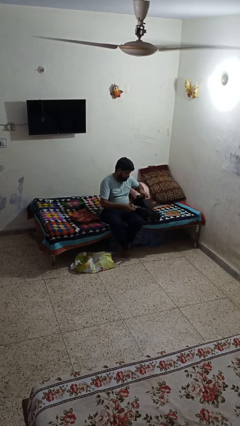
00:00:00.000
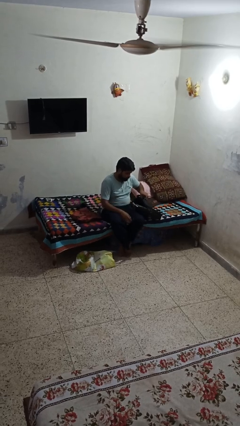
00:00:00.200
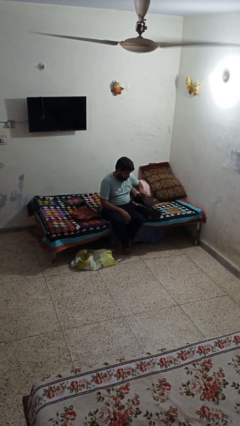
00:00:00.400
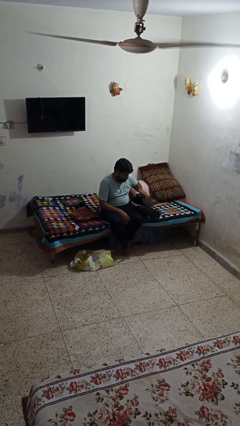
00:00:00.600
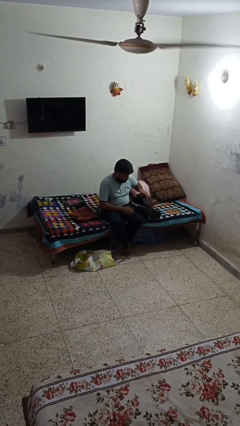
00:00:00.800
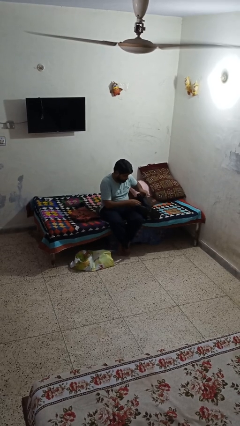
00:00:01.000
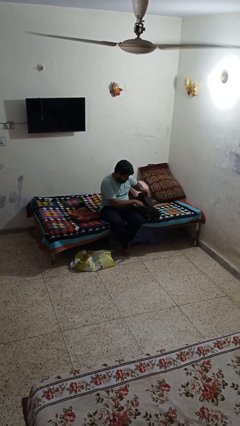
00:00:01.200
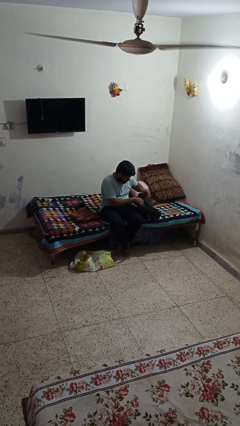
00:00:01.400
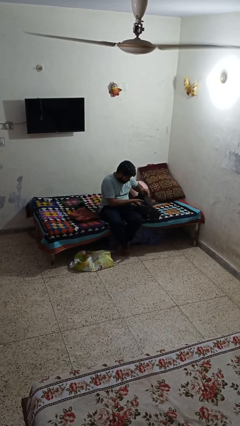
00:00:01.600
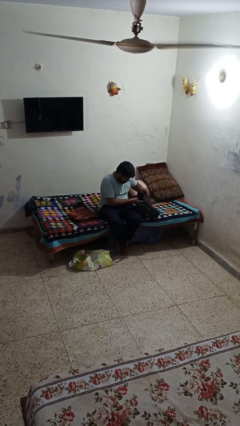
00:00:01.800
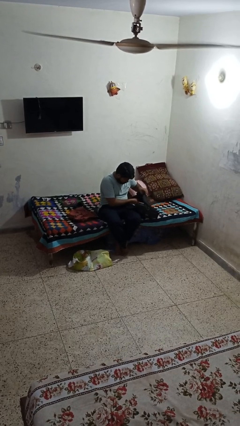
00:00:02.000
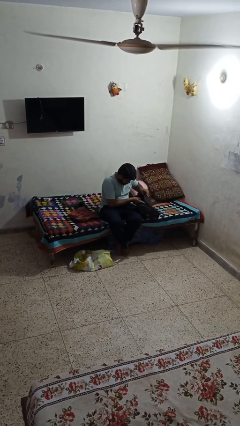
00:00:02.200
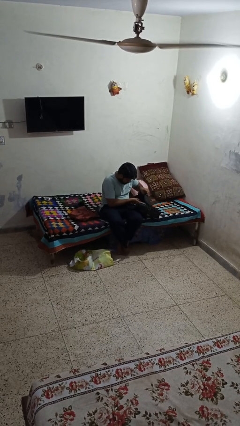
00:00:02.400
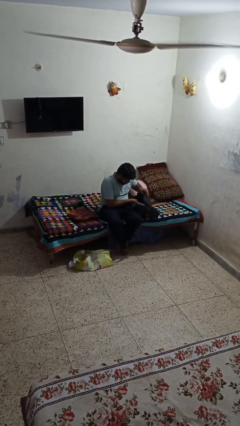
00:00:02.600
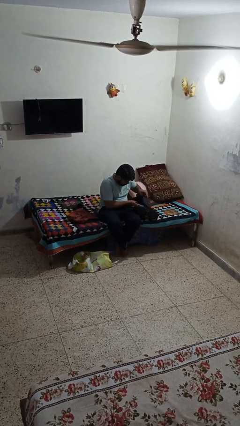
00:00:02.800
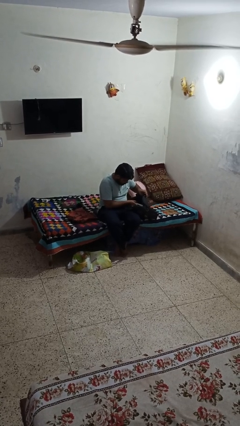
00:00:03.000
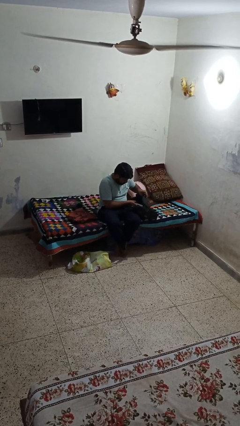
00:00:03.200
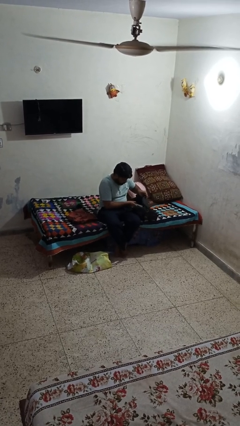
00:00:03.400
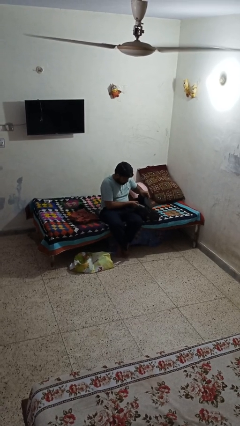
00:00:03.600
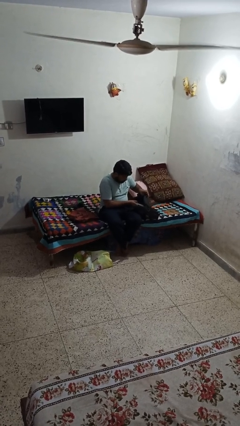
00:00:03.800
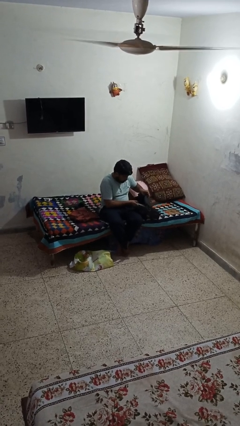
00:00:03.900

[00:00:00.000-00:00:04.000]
person searches in backpack

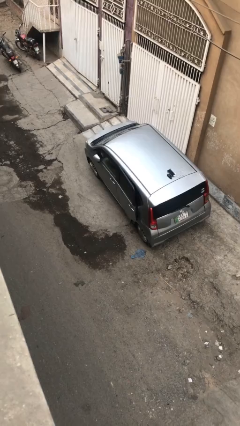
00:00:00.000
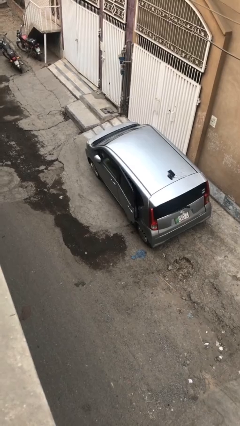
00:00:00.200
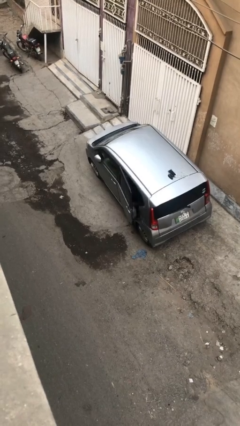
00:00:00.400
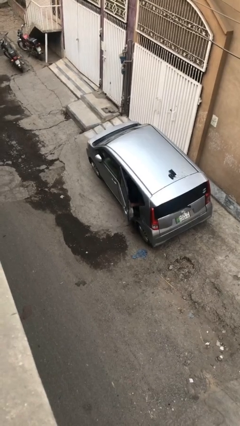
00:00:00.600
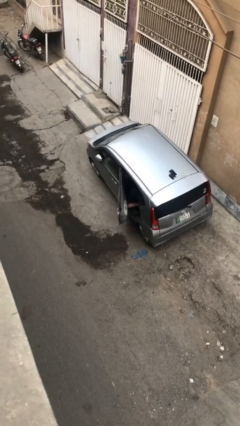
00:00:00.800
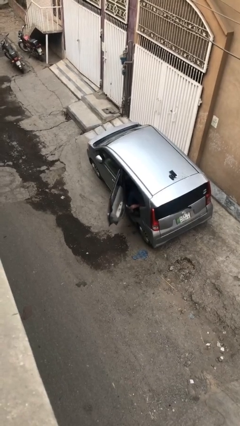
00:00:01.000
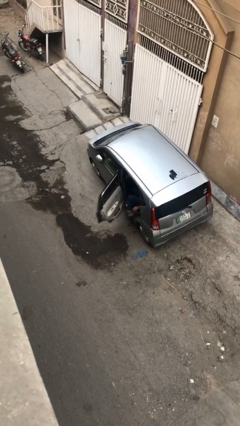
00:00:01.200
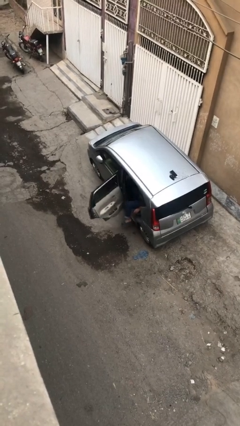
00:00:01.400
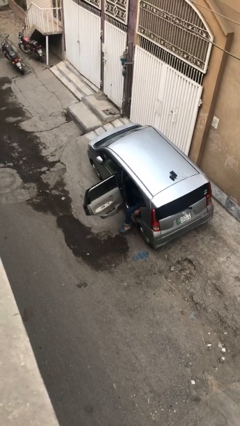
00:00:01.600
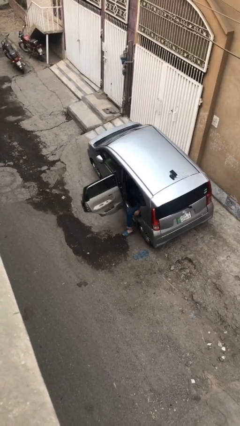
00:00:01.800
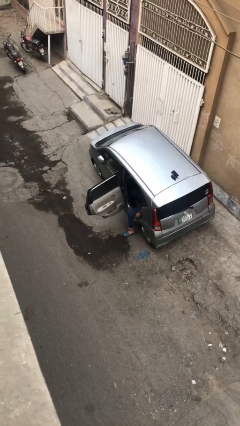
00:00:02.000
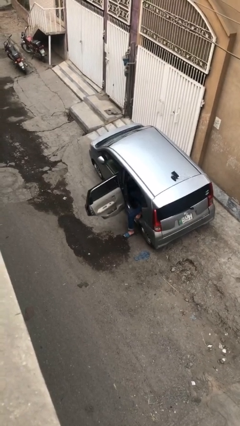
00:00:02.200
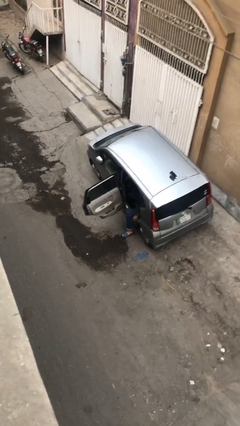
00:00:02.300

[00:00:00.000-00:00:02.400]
person opens car door

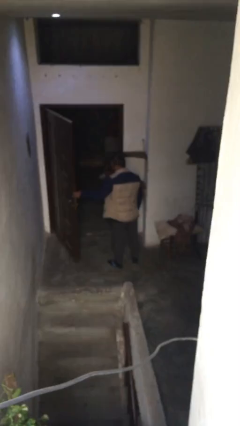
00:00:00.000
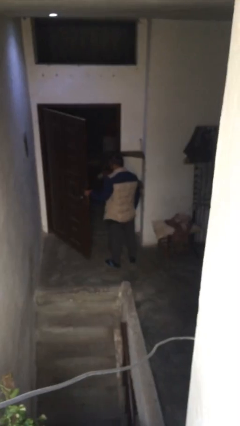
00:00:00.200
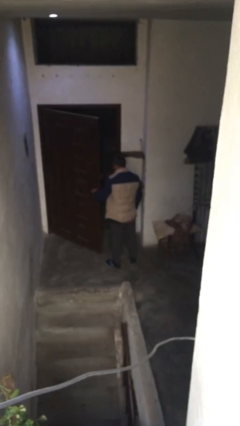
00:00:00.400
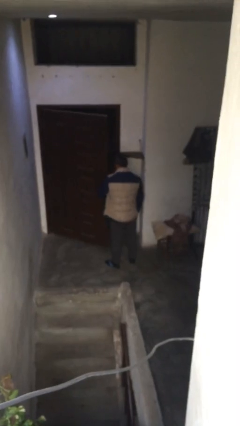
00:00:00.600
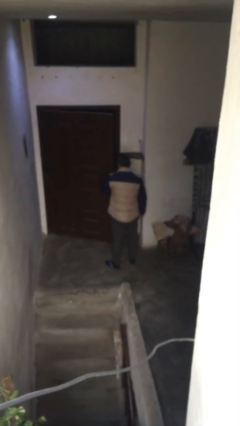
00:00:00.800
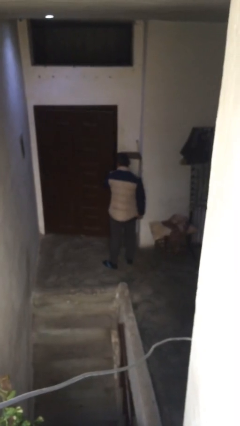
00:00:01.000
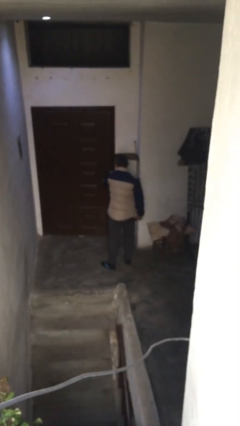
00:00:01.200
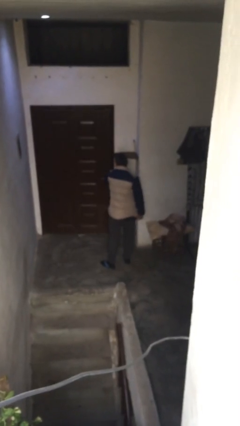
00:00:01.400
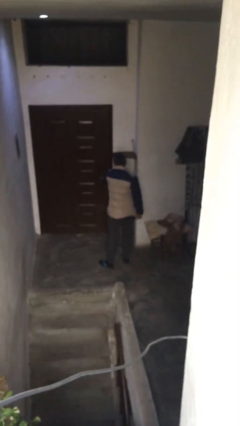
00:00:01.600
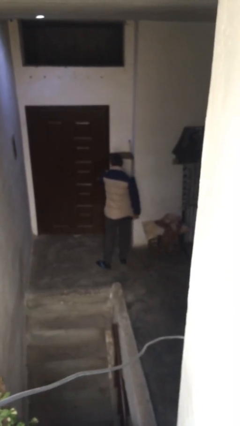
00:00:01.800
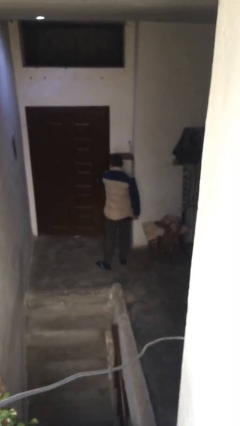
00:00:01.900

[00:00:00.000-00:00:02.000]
person closes facility door

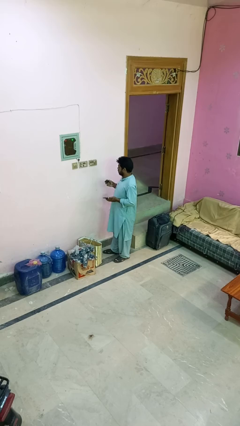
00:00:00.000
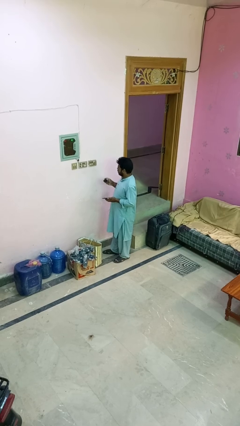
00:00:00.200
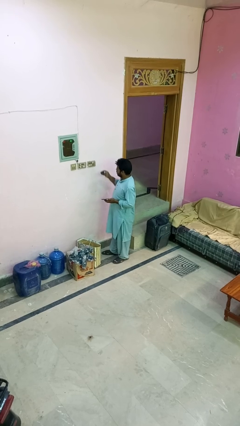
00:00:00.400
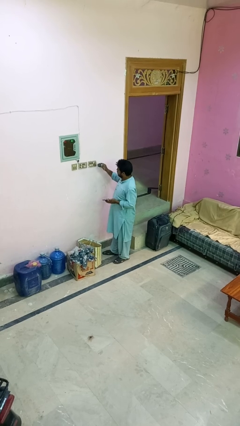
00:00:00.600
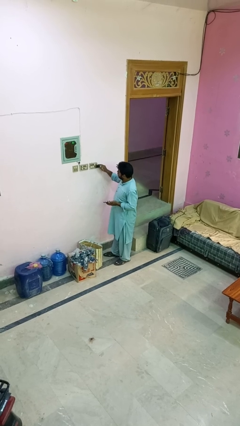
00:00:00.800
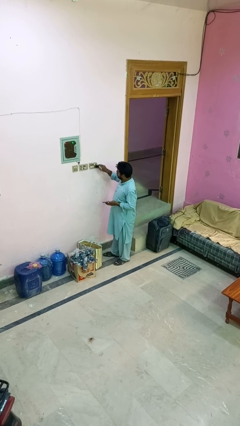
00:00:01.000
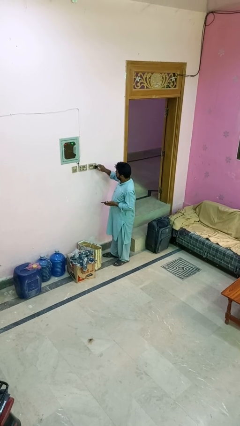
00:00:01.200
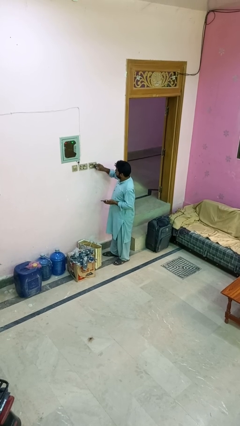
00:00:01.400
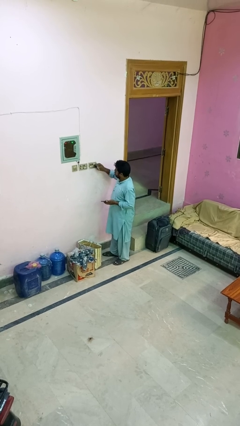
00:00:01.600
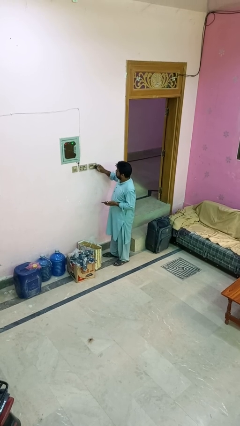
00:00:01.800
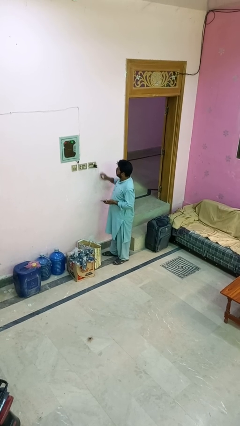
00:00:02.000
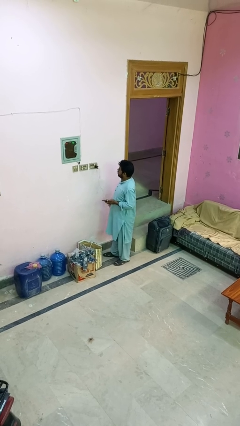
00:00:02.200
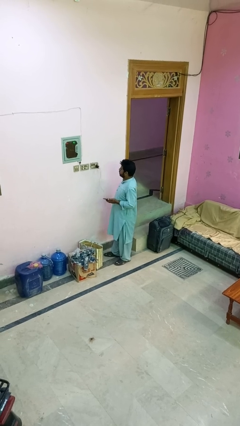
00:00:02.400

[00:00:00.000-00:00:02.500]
person plugs into electrical socket

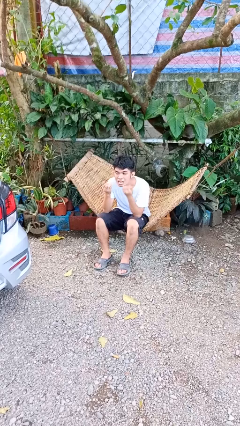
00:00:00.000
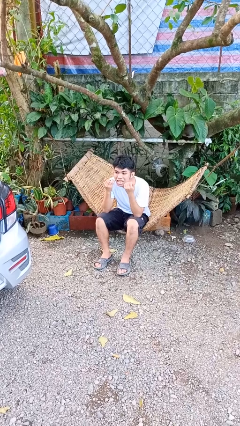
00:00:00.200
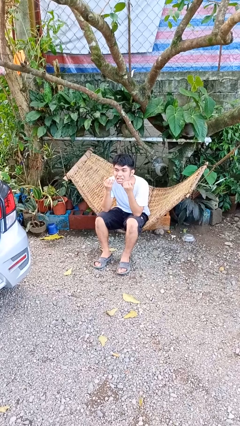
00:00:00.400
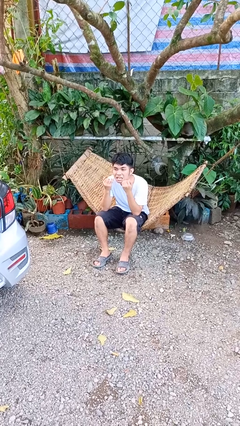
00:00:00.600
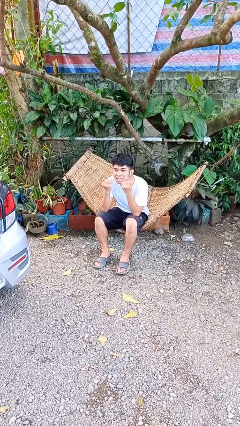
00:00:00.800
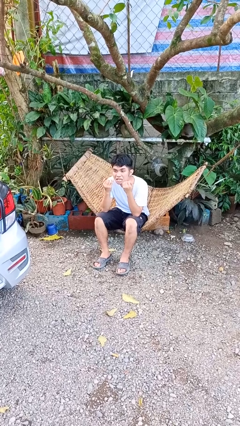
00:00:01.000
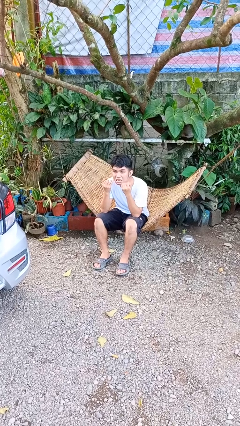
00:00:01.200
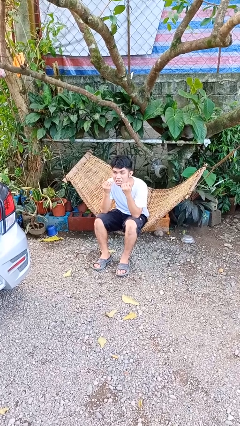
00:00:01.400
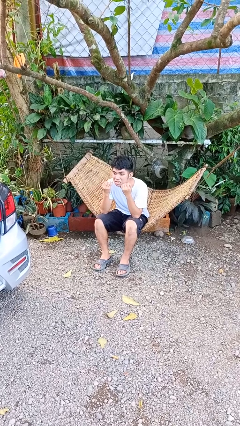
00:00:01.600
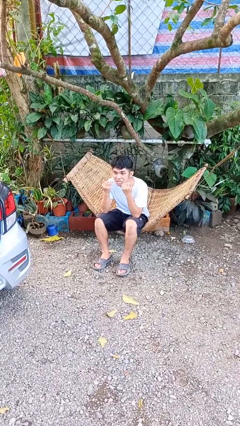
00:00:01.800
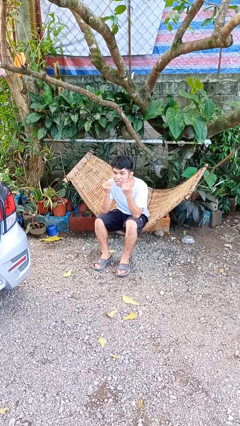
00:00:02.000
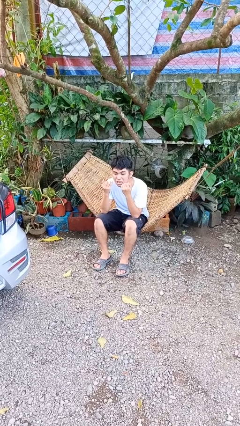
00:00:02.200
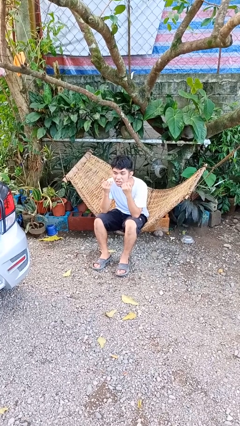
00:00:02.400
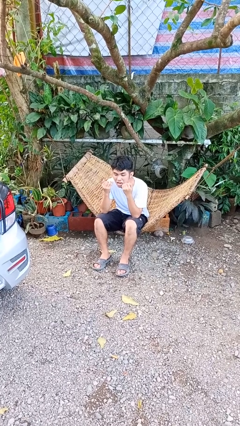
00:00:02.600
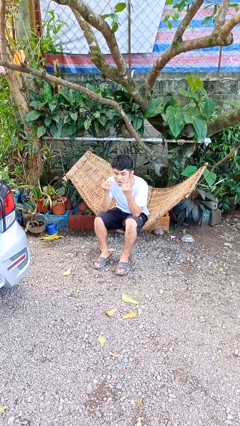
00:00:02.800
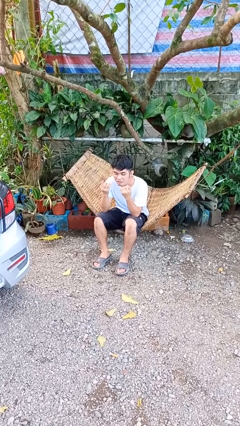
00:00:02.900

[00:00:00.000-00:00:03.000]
person flosses

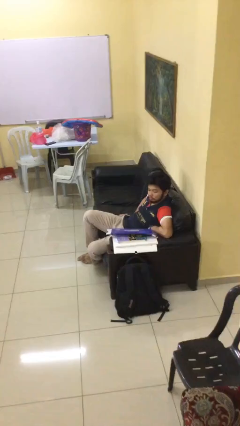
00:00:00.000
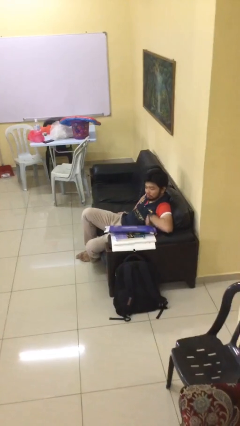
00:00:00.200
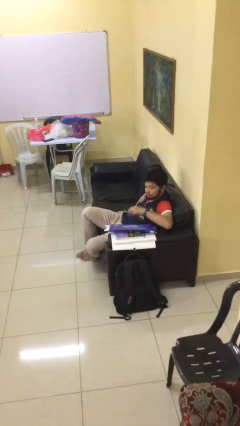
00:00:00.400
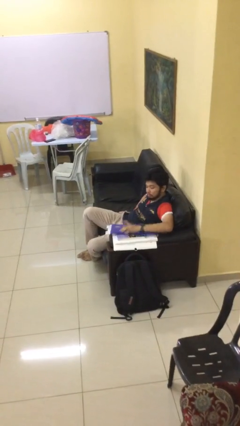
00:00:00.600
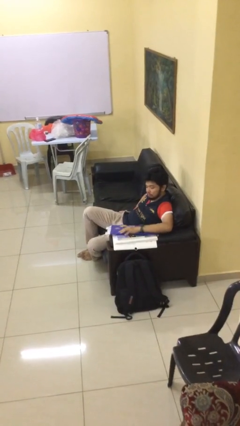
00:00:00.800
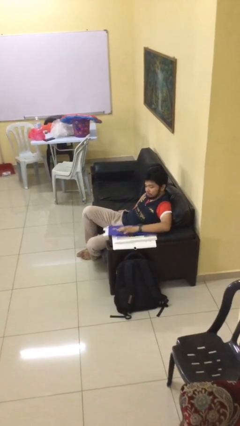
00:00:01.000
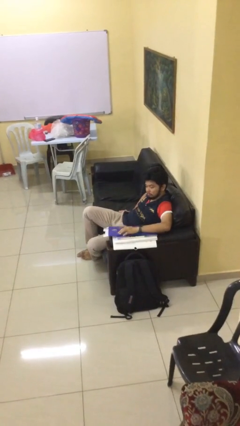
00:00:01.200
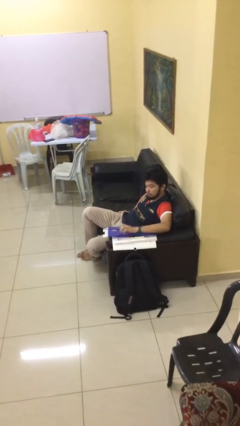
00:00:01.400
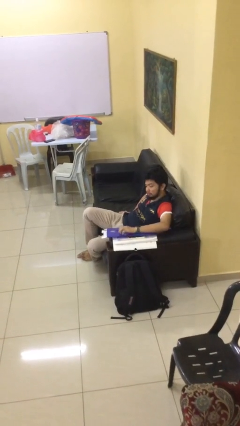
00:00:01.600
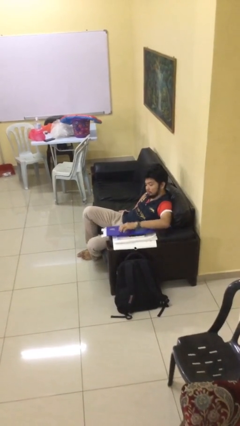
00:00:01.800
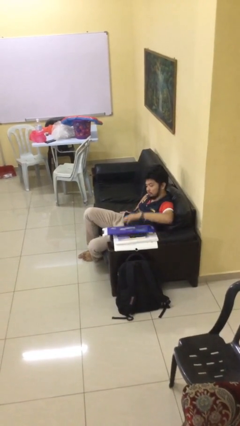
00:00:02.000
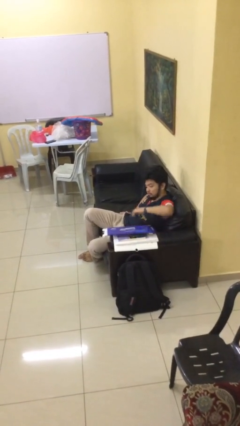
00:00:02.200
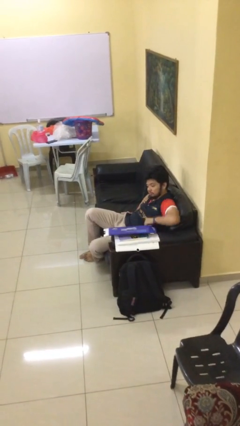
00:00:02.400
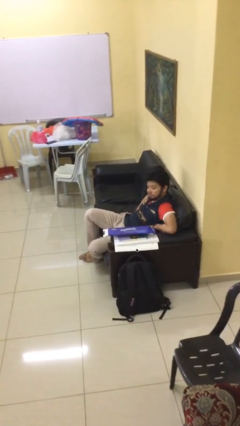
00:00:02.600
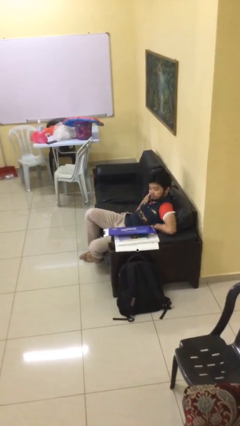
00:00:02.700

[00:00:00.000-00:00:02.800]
person taps object with finger

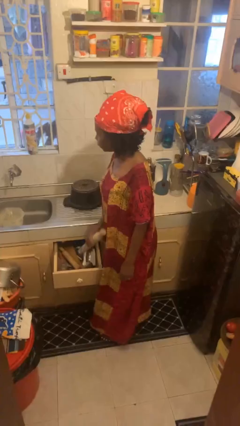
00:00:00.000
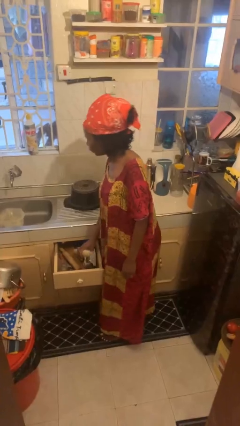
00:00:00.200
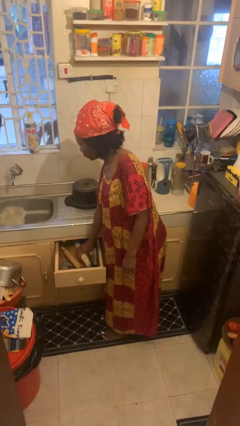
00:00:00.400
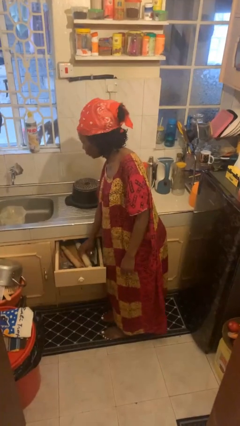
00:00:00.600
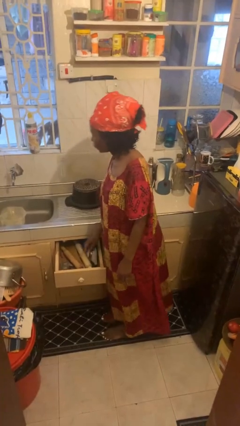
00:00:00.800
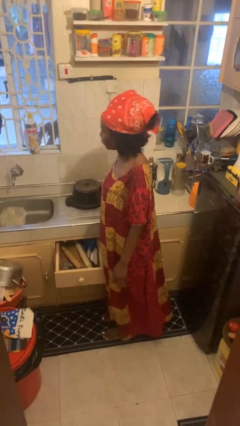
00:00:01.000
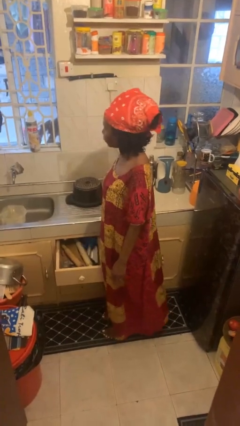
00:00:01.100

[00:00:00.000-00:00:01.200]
person puts object into kitchen drawer
